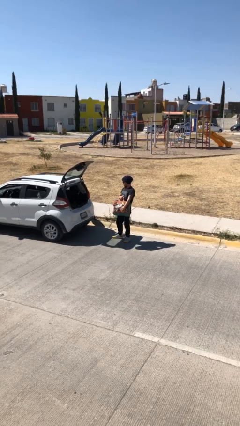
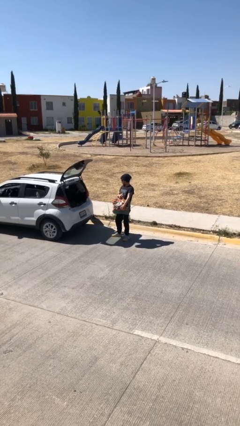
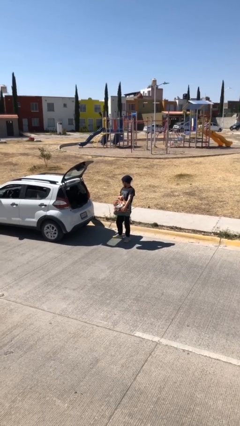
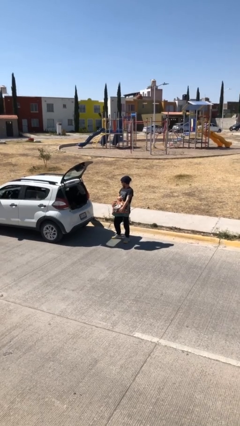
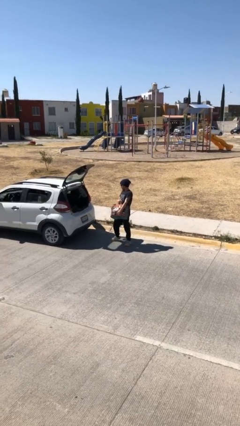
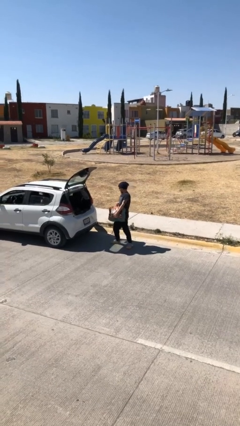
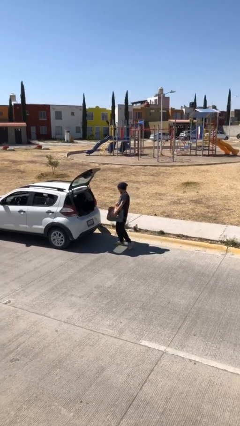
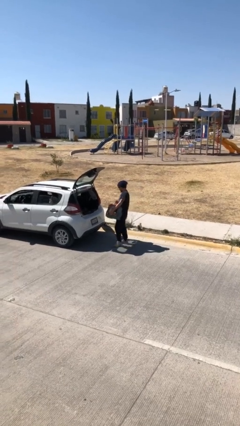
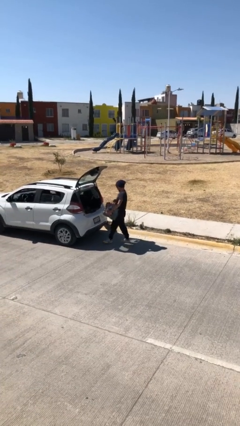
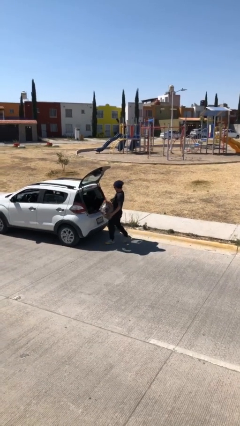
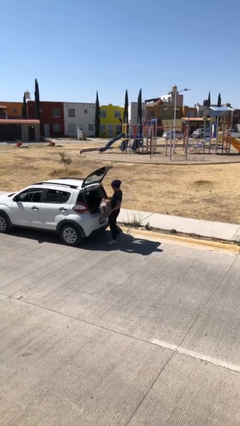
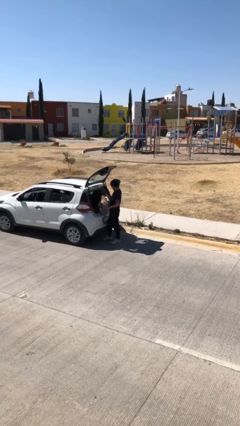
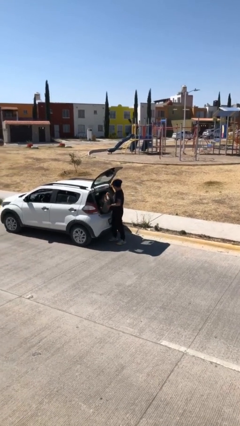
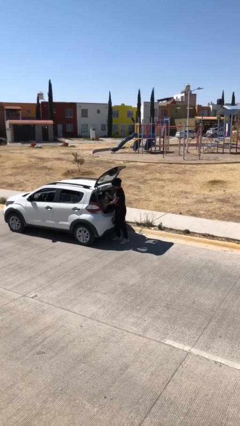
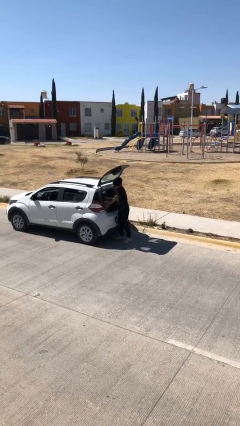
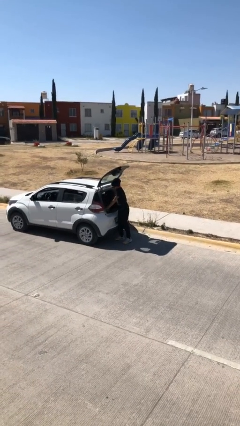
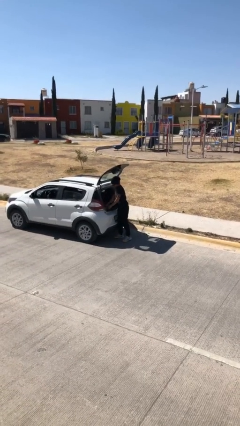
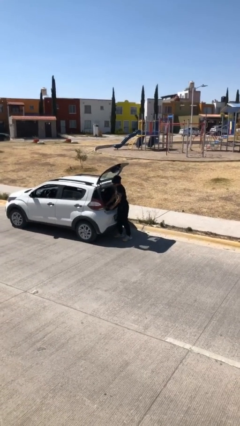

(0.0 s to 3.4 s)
person loads car

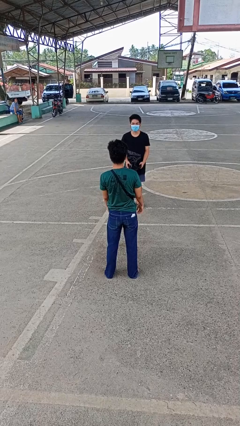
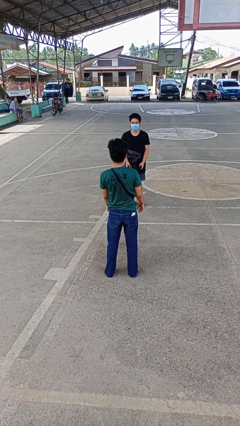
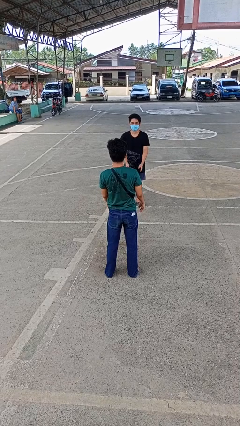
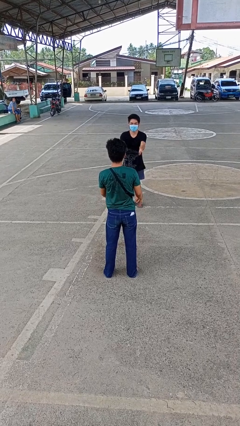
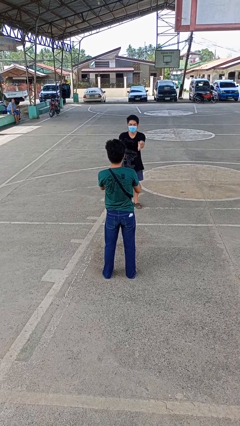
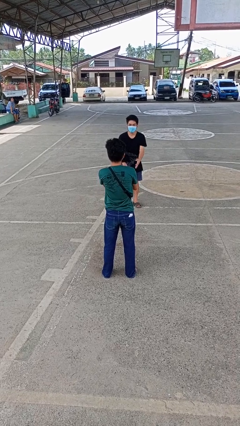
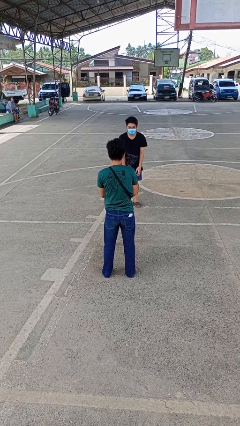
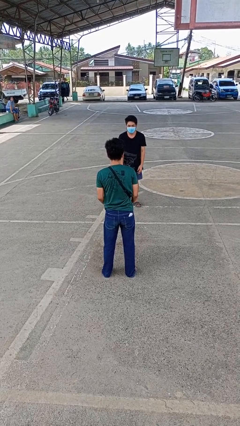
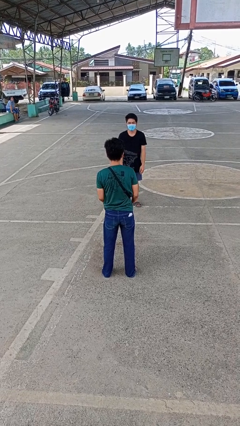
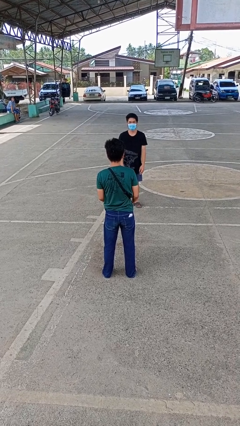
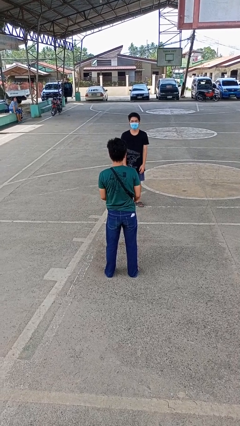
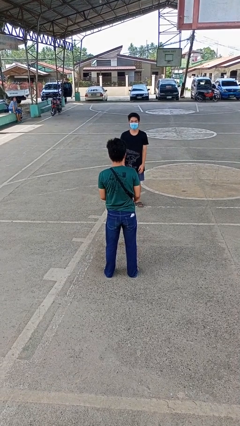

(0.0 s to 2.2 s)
person catches object from person

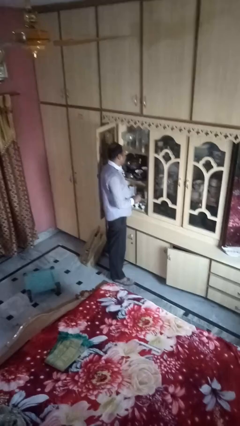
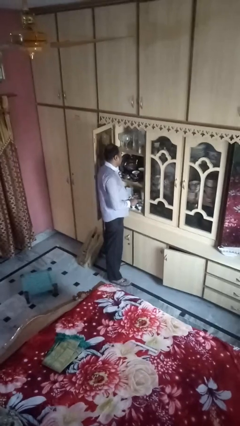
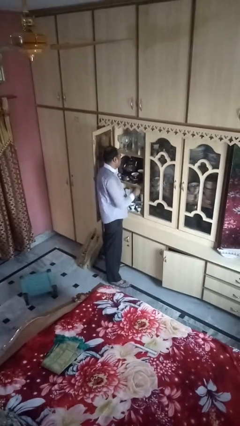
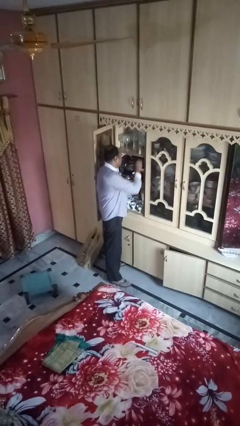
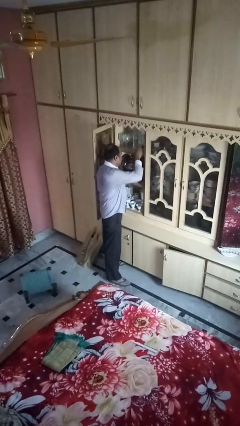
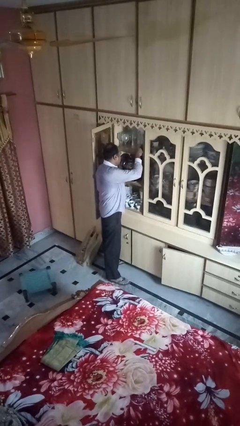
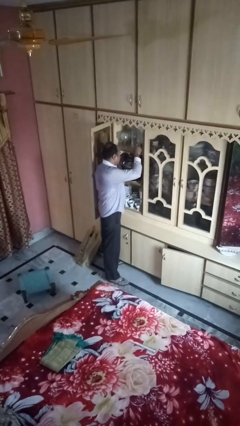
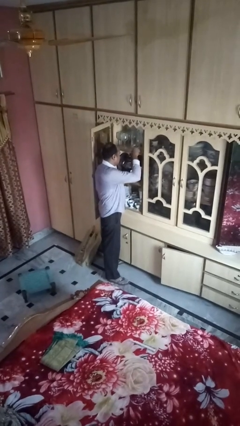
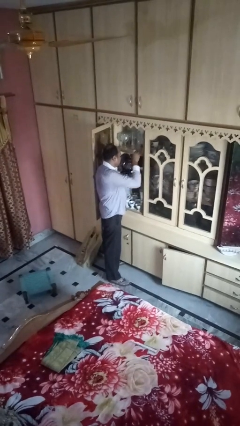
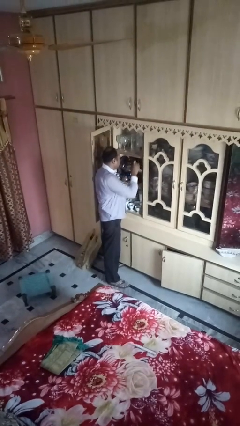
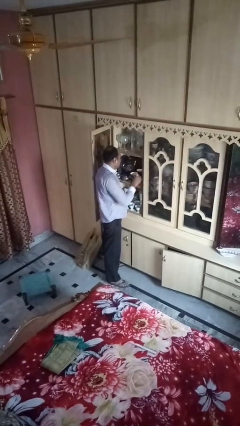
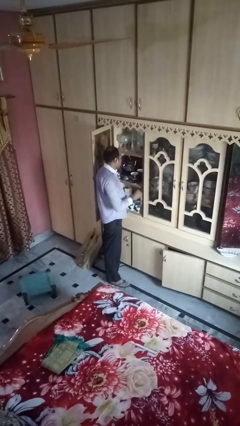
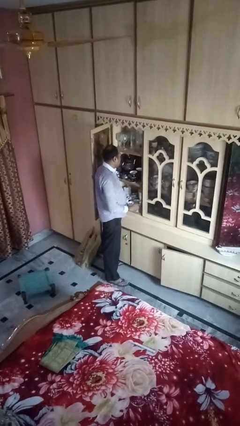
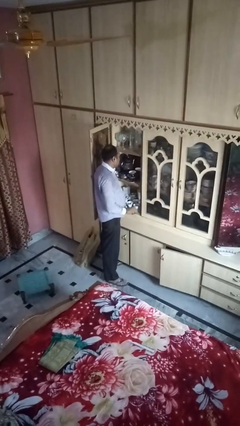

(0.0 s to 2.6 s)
person picks up object from shelf

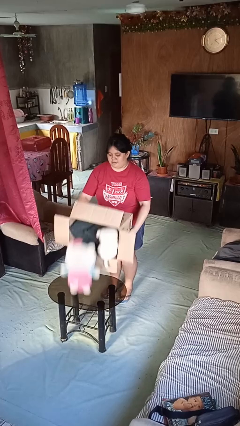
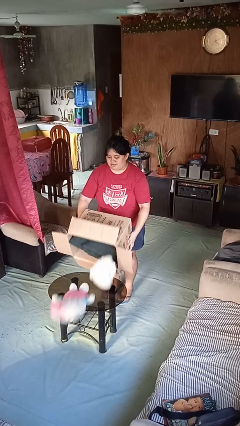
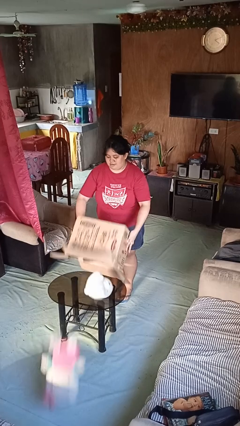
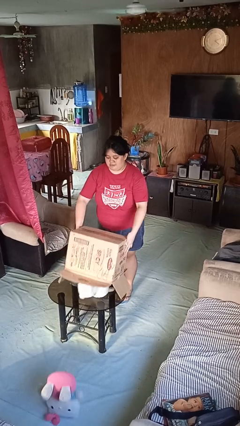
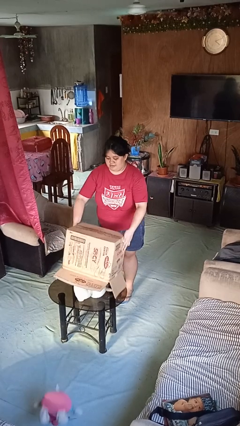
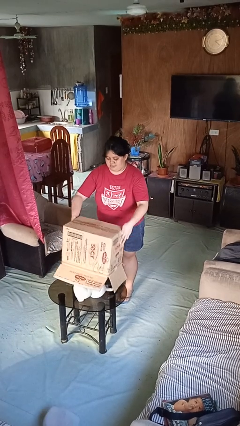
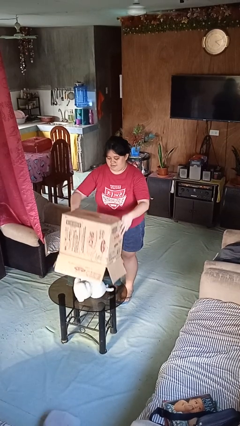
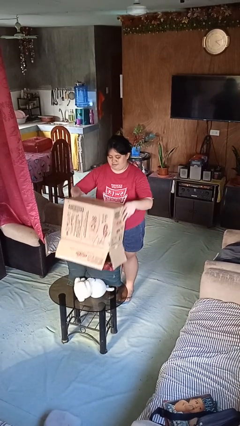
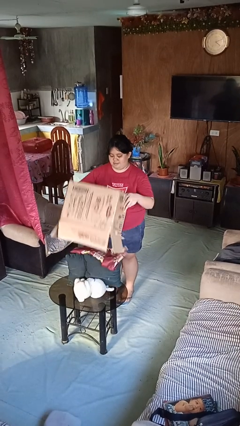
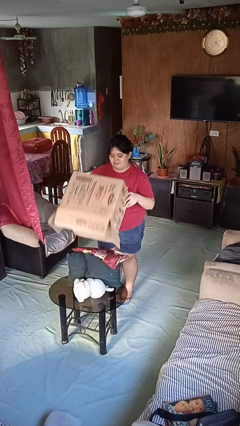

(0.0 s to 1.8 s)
person unloads box onto table

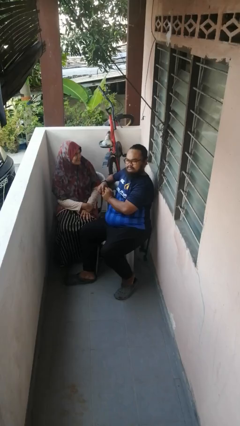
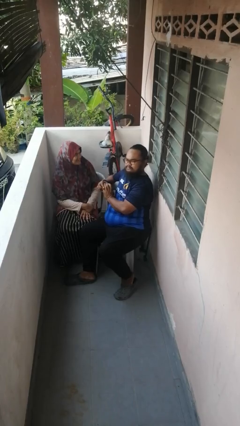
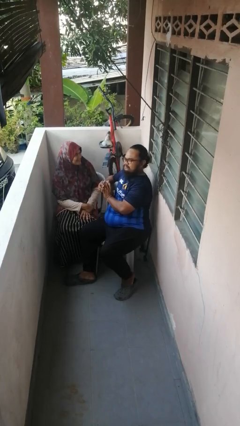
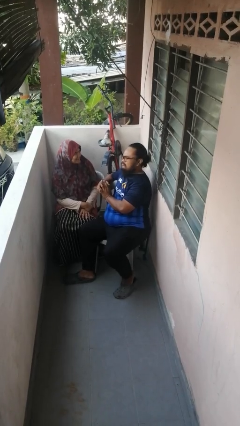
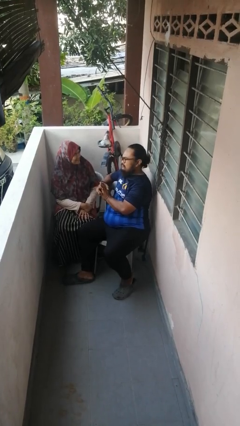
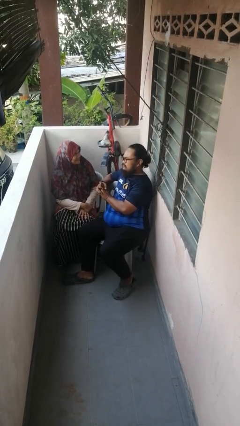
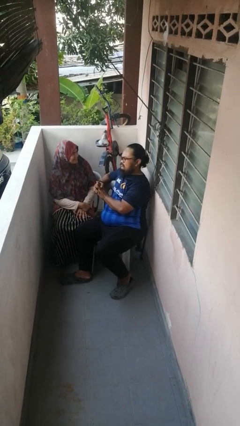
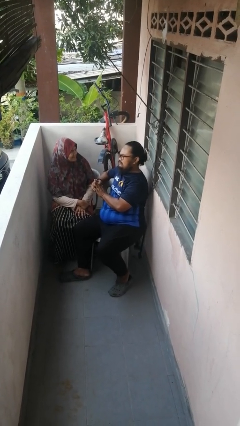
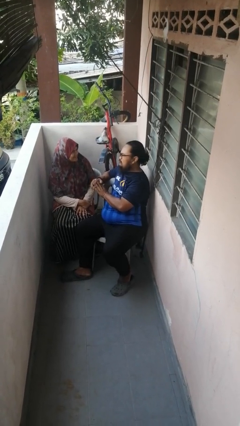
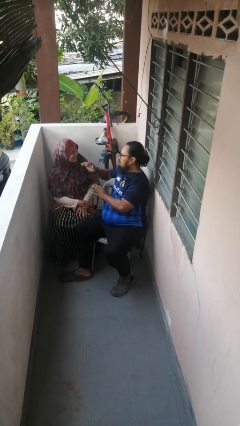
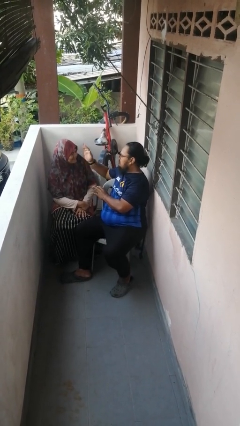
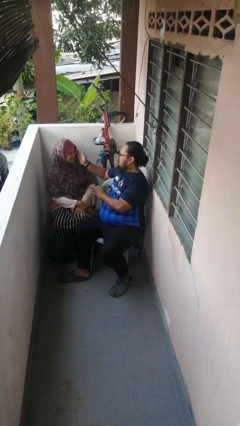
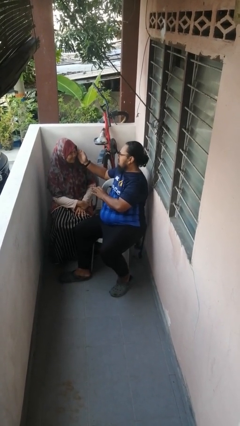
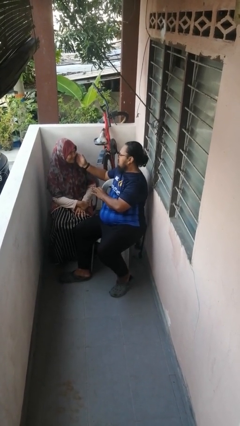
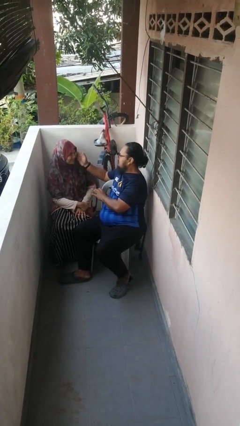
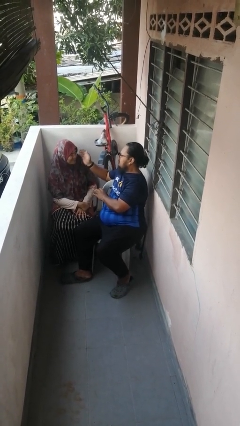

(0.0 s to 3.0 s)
person touches face of person

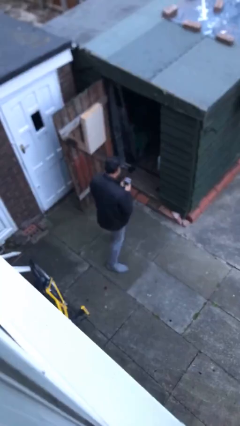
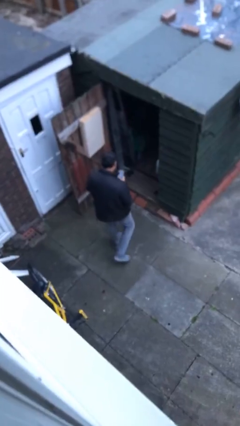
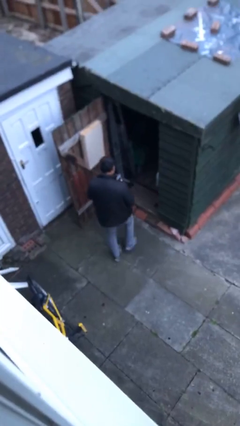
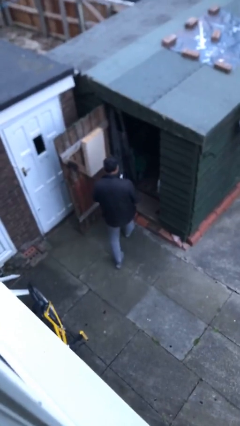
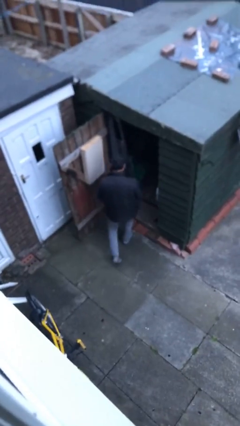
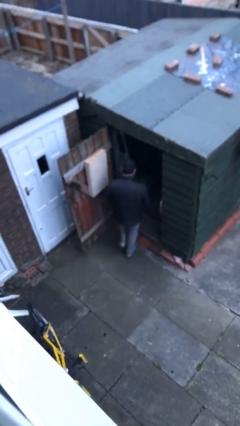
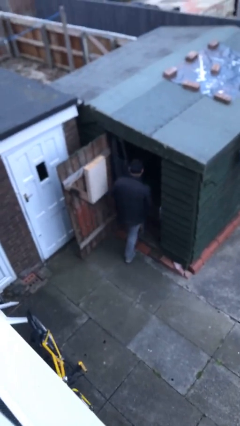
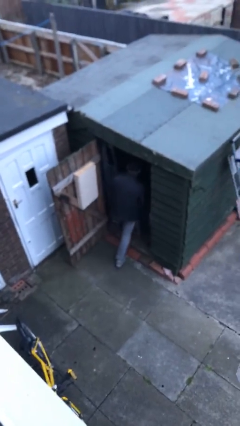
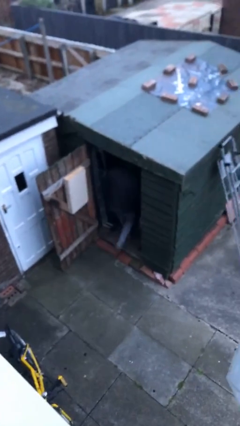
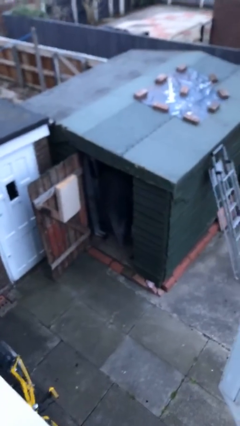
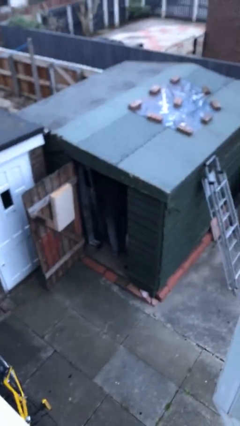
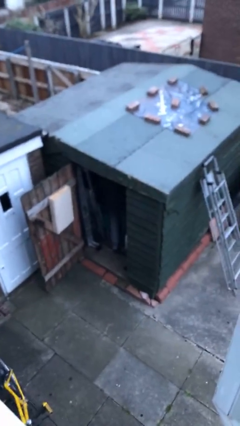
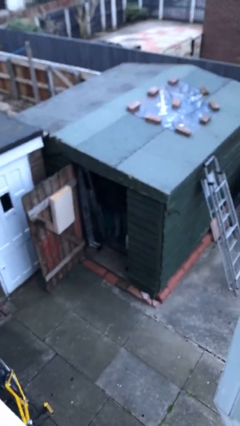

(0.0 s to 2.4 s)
person exits scene through structure

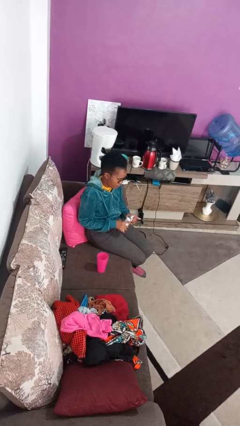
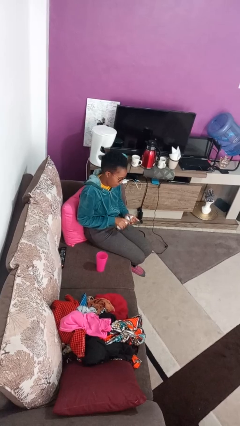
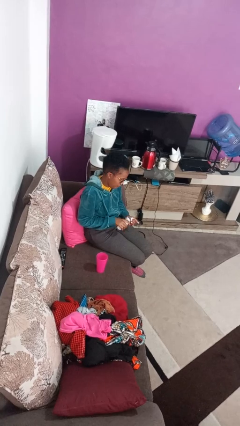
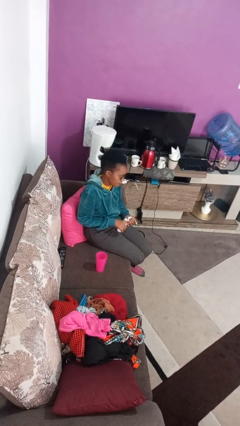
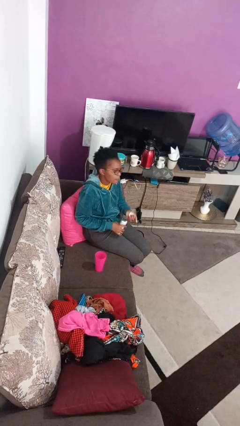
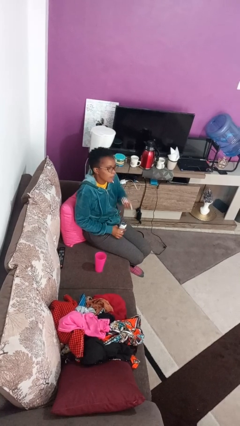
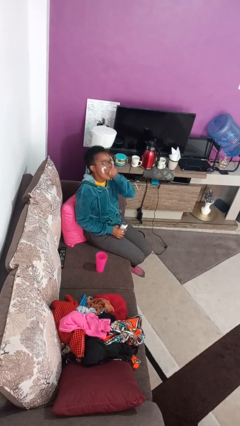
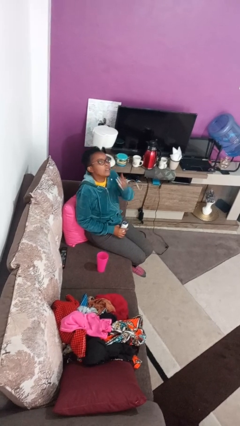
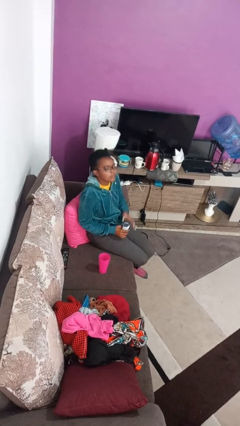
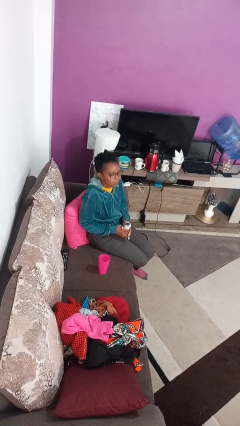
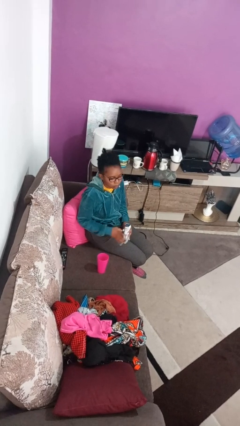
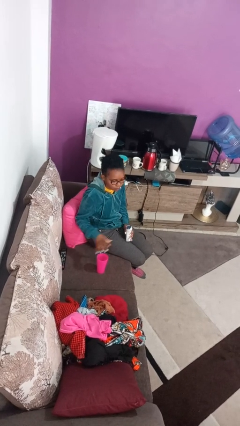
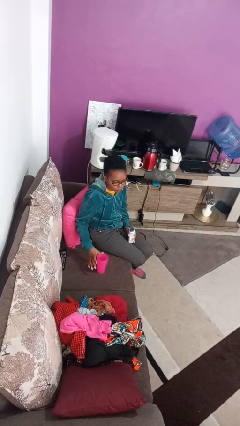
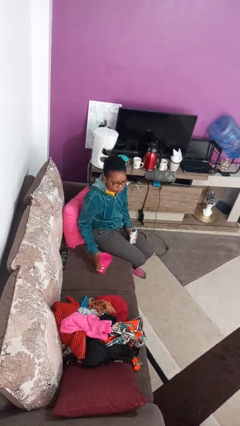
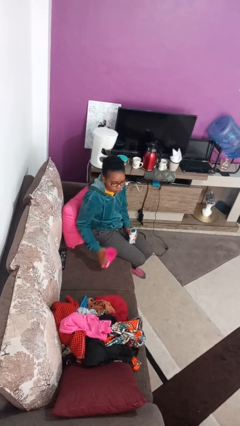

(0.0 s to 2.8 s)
person takes medicine pills
